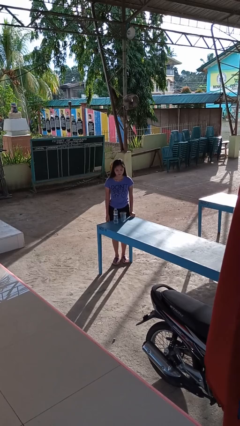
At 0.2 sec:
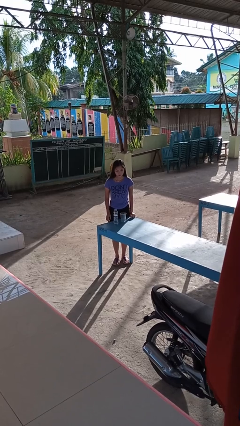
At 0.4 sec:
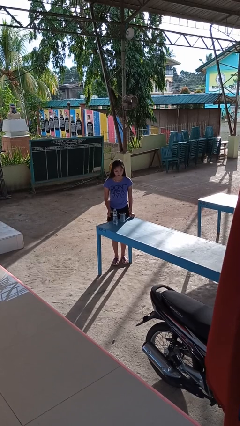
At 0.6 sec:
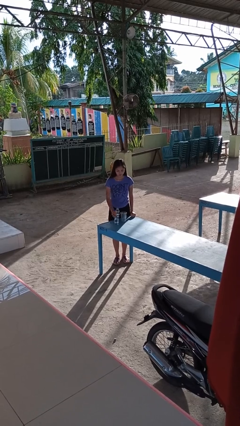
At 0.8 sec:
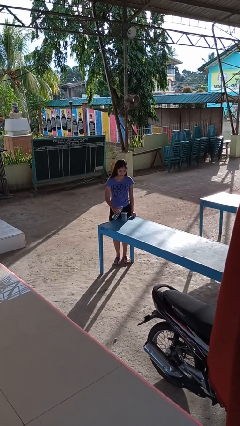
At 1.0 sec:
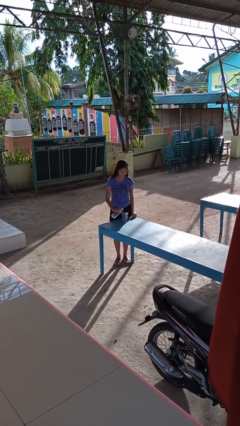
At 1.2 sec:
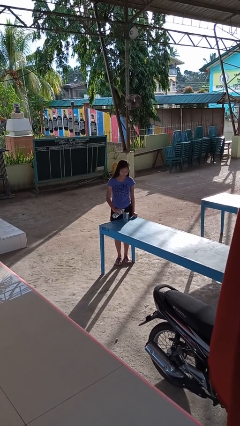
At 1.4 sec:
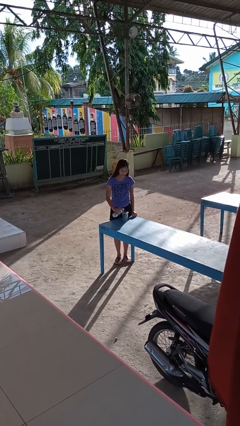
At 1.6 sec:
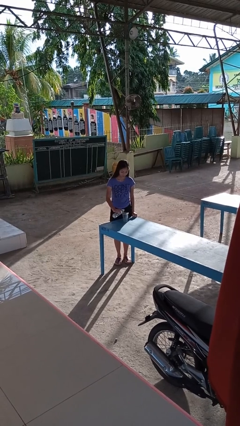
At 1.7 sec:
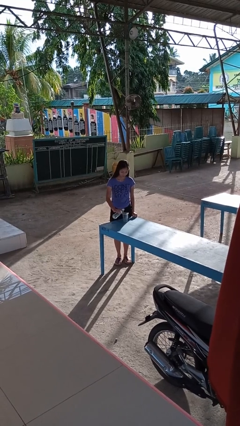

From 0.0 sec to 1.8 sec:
person pours liquid into cup

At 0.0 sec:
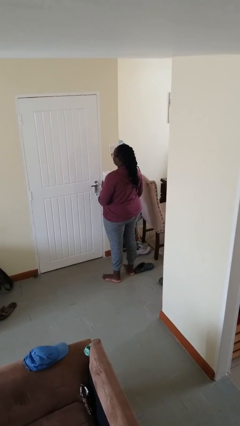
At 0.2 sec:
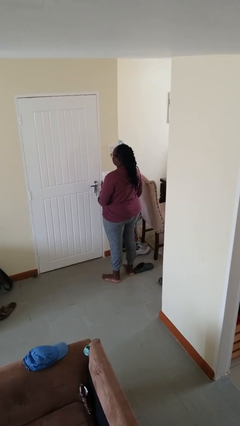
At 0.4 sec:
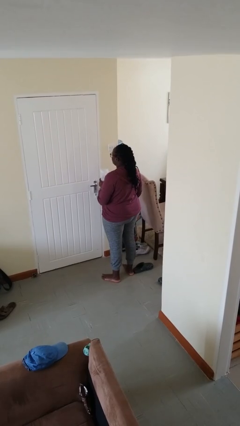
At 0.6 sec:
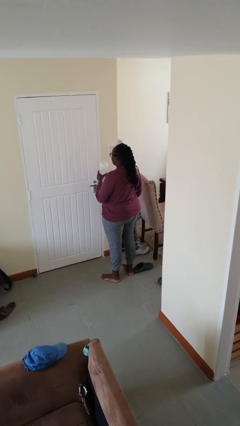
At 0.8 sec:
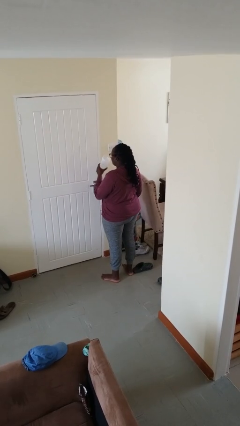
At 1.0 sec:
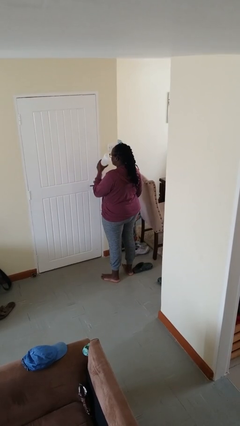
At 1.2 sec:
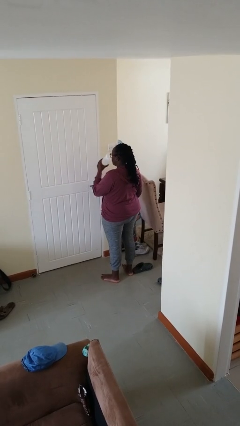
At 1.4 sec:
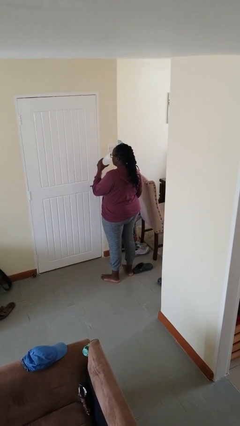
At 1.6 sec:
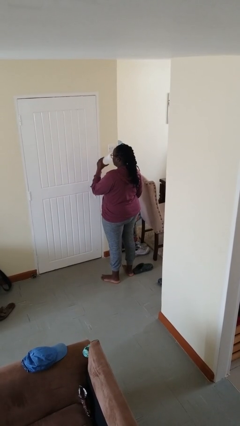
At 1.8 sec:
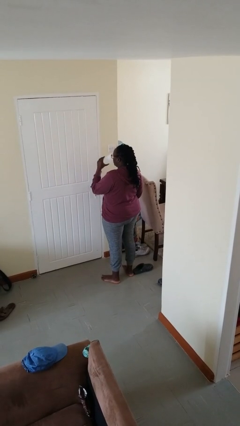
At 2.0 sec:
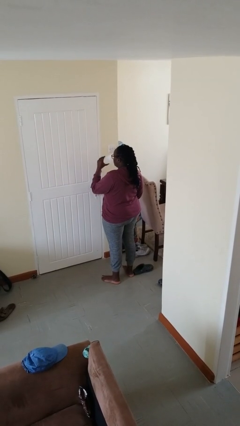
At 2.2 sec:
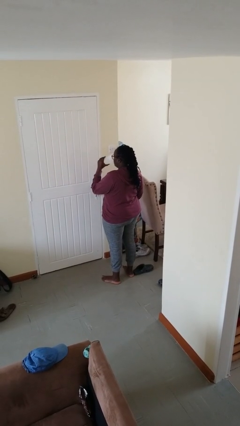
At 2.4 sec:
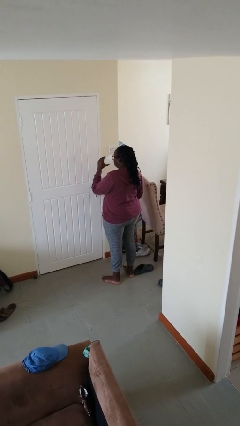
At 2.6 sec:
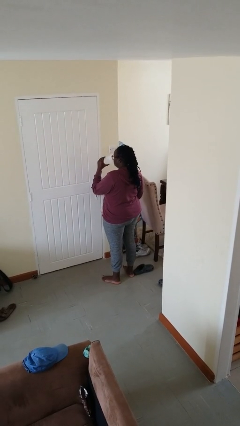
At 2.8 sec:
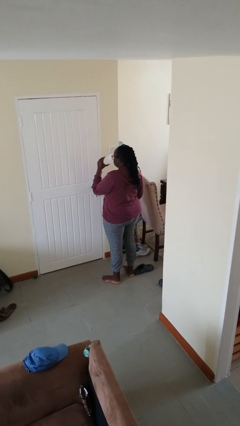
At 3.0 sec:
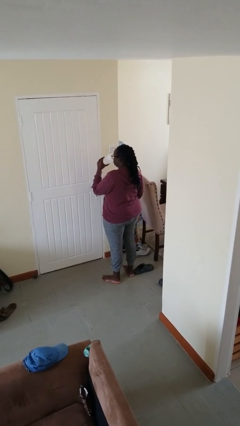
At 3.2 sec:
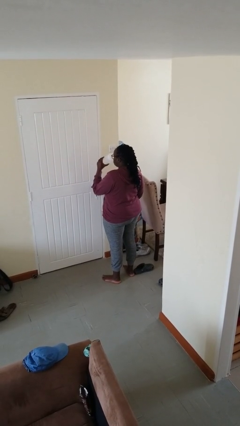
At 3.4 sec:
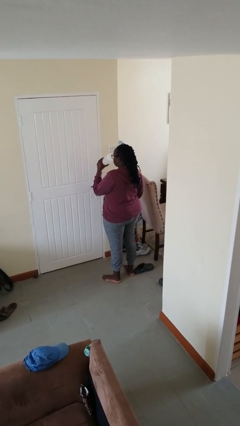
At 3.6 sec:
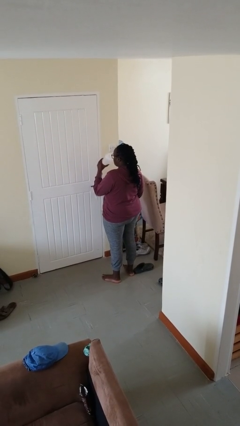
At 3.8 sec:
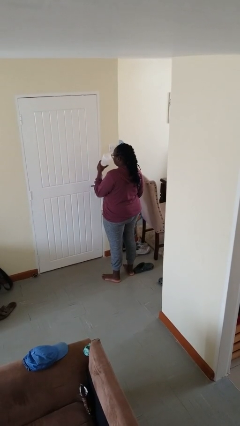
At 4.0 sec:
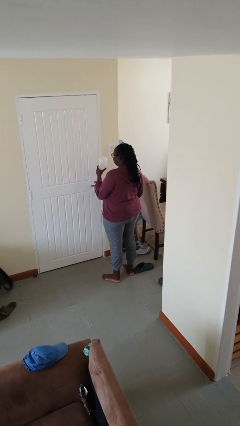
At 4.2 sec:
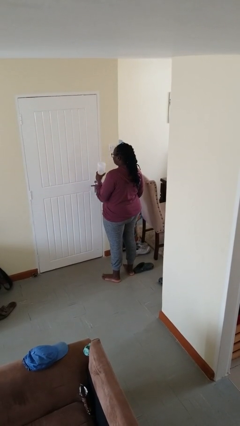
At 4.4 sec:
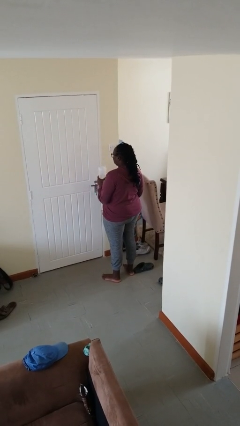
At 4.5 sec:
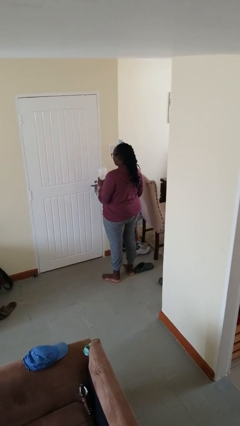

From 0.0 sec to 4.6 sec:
person drinks from bottle

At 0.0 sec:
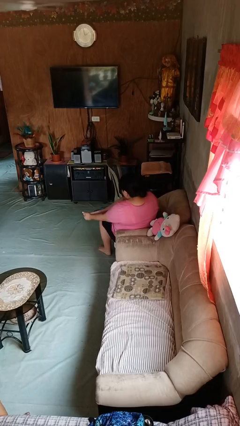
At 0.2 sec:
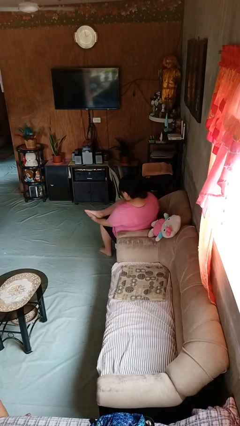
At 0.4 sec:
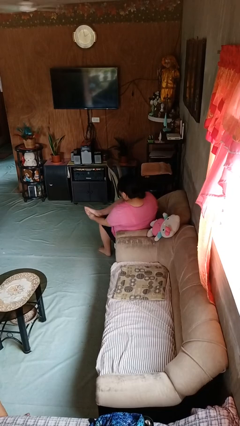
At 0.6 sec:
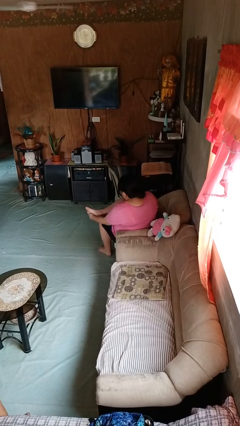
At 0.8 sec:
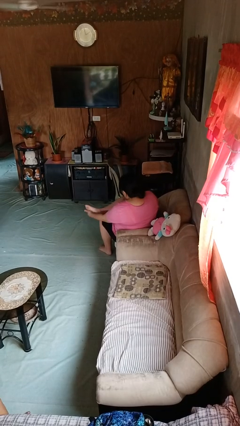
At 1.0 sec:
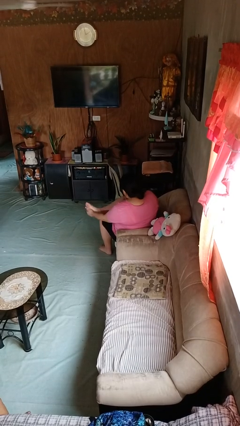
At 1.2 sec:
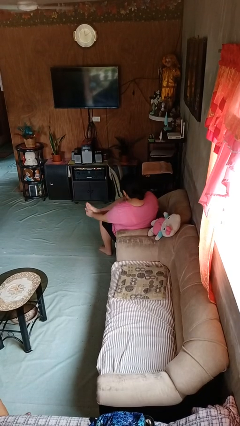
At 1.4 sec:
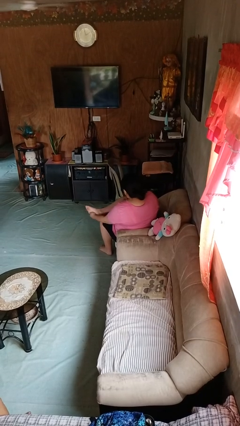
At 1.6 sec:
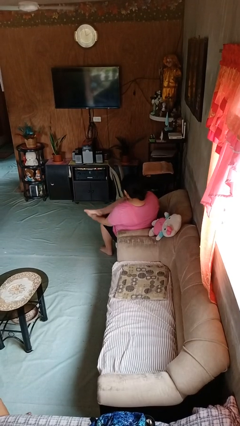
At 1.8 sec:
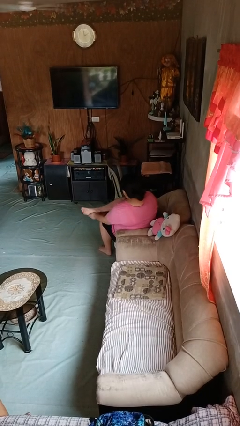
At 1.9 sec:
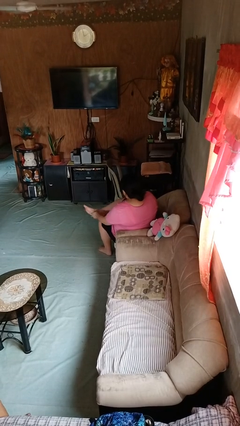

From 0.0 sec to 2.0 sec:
person rubs foot

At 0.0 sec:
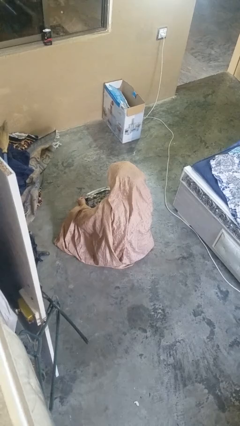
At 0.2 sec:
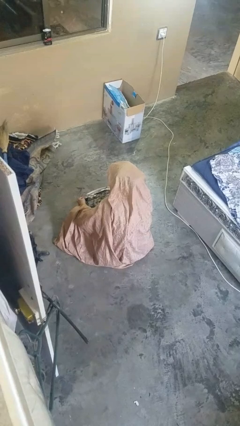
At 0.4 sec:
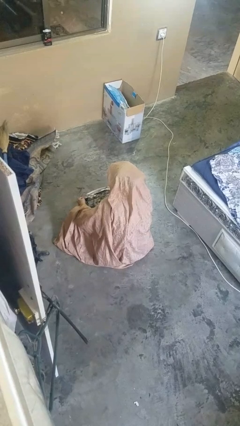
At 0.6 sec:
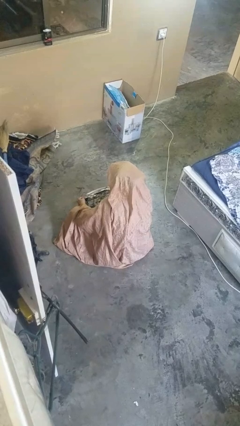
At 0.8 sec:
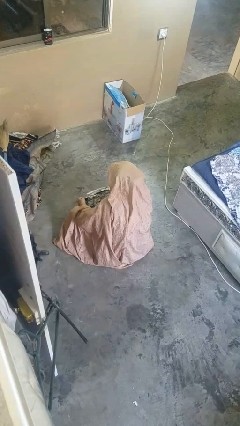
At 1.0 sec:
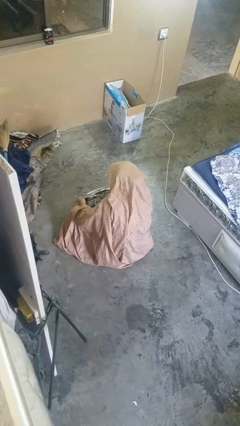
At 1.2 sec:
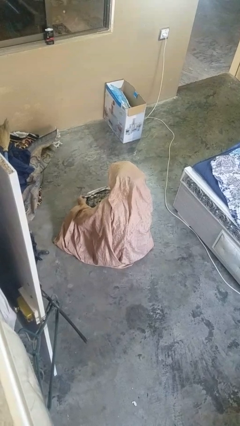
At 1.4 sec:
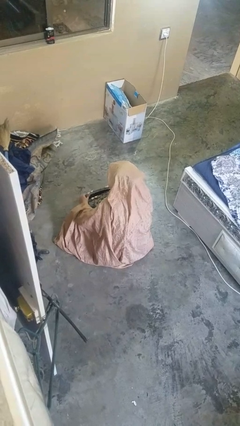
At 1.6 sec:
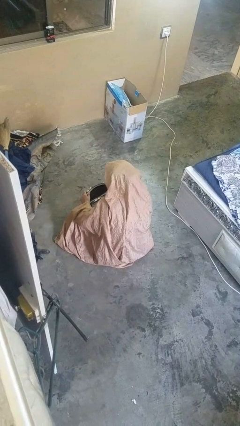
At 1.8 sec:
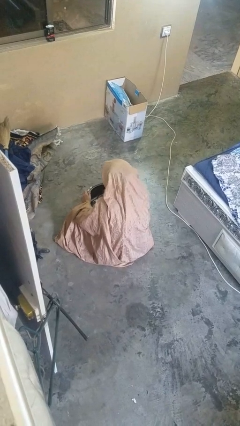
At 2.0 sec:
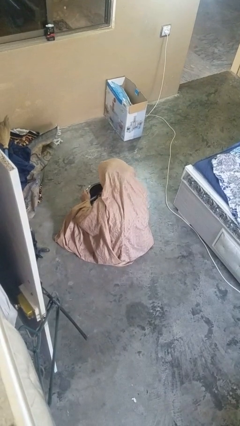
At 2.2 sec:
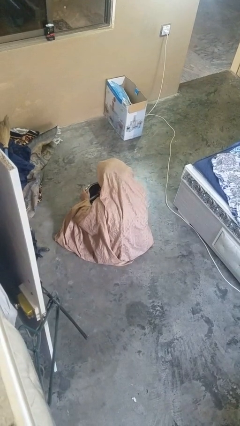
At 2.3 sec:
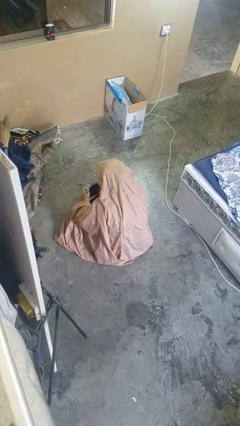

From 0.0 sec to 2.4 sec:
person searches in purse

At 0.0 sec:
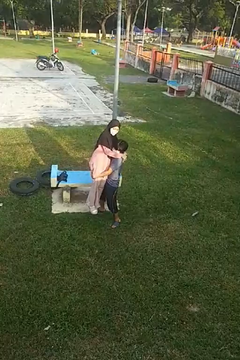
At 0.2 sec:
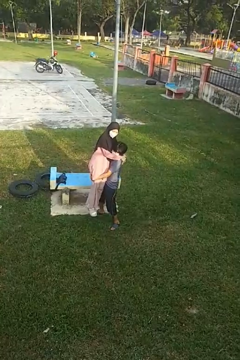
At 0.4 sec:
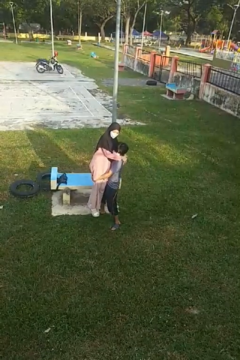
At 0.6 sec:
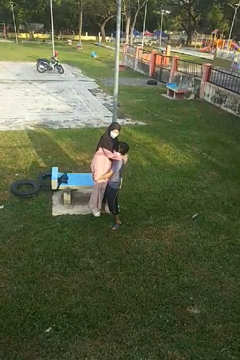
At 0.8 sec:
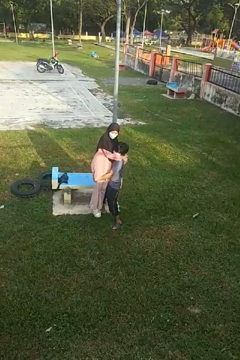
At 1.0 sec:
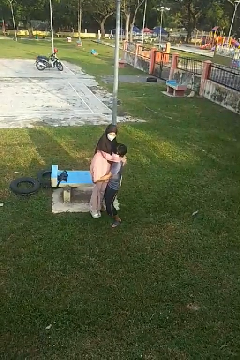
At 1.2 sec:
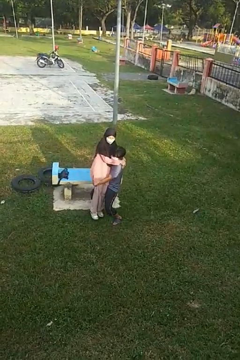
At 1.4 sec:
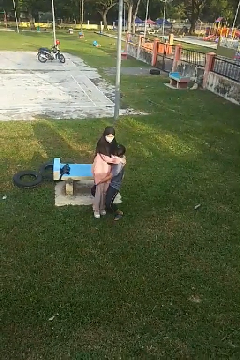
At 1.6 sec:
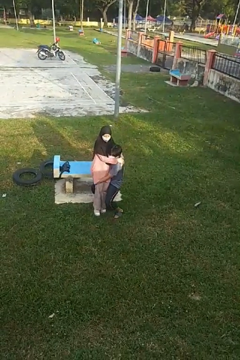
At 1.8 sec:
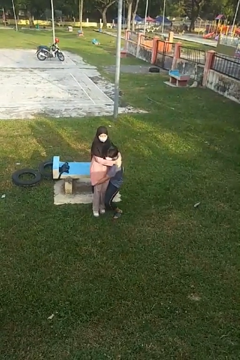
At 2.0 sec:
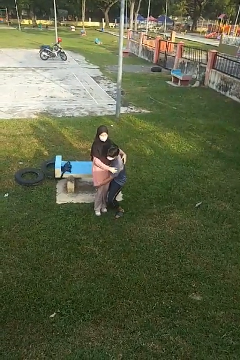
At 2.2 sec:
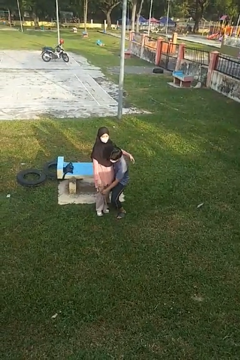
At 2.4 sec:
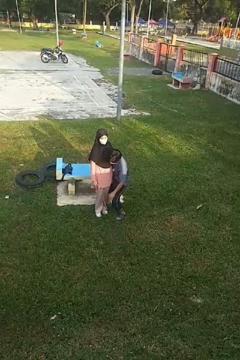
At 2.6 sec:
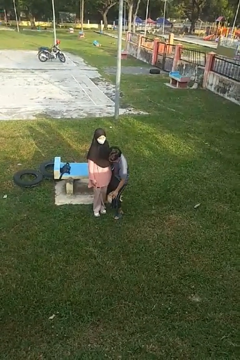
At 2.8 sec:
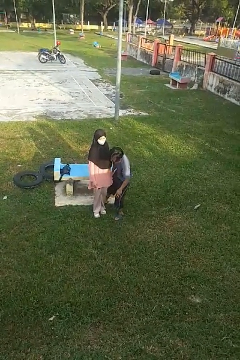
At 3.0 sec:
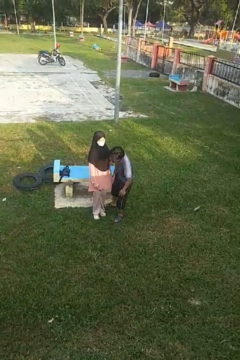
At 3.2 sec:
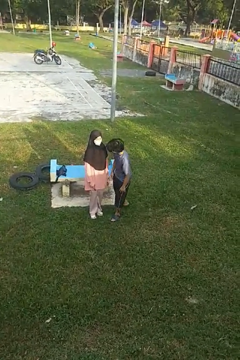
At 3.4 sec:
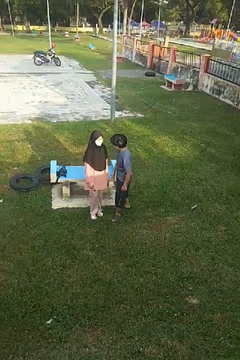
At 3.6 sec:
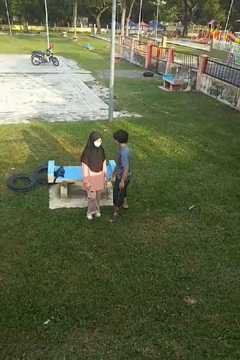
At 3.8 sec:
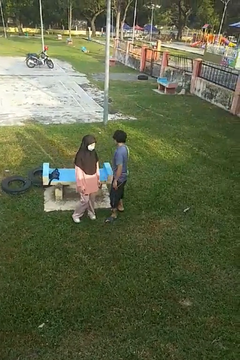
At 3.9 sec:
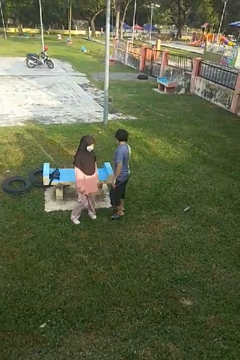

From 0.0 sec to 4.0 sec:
person puts down person

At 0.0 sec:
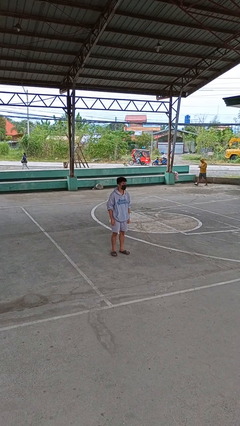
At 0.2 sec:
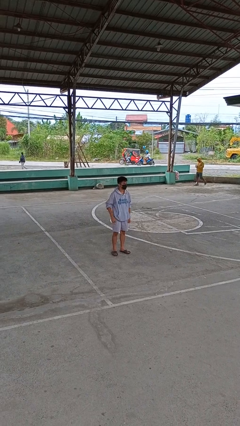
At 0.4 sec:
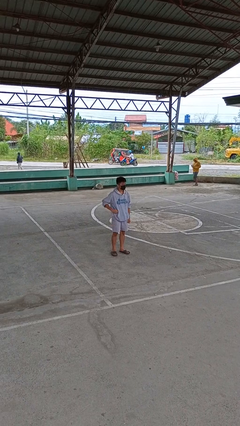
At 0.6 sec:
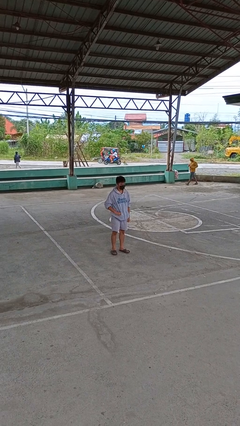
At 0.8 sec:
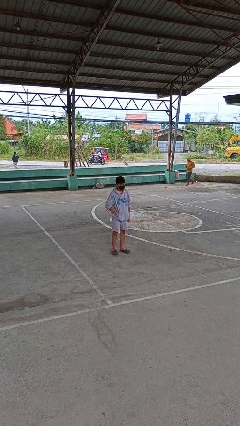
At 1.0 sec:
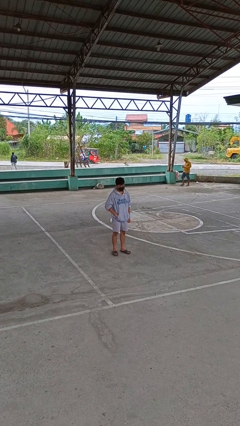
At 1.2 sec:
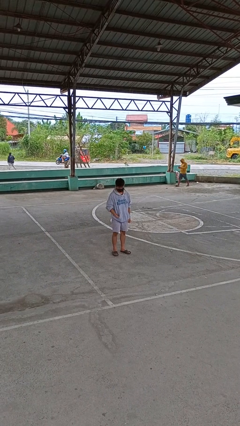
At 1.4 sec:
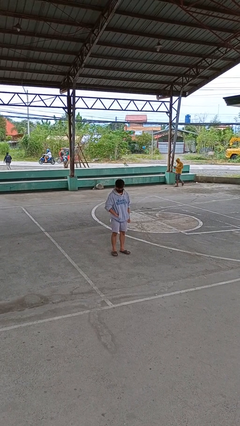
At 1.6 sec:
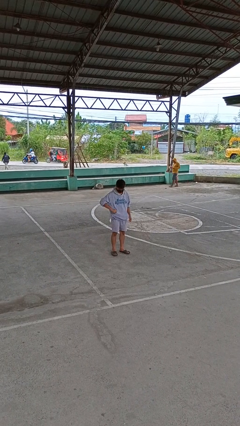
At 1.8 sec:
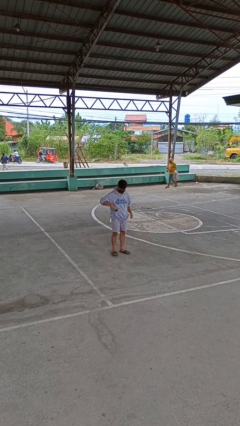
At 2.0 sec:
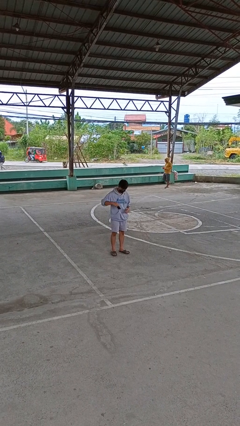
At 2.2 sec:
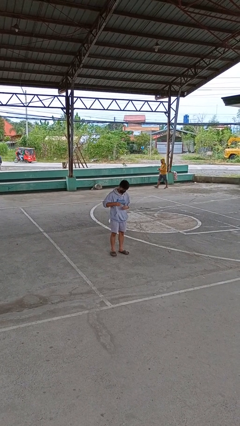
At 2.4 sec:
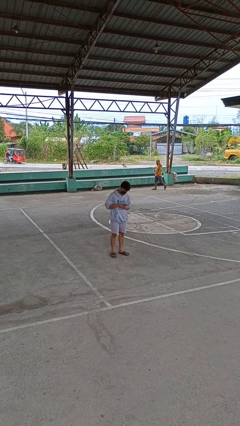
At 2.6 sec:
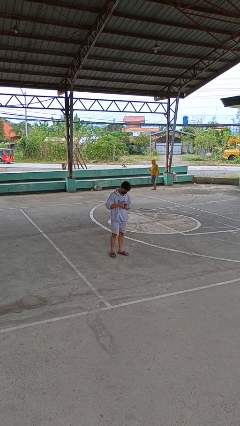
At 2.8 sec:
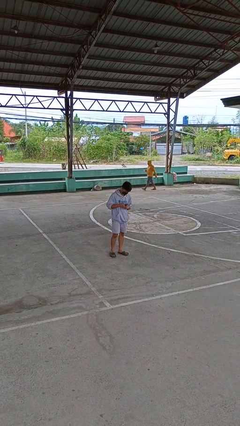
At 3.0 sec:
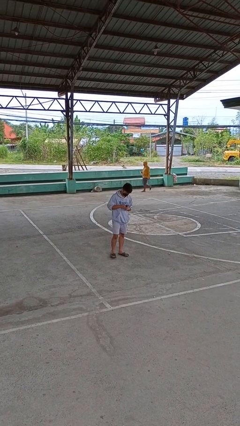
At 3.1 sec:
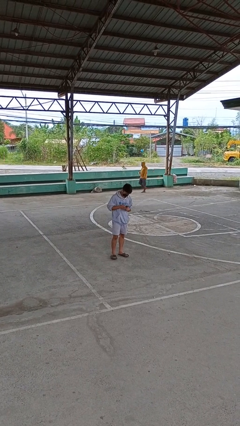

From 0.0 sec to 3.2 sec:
person takes phone from pocket
